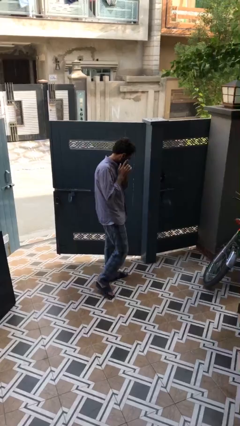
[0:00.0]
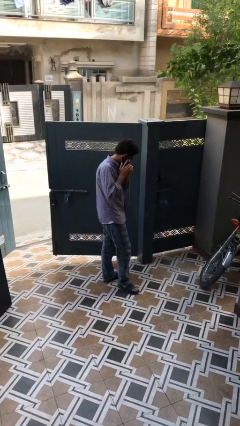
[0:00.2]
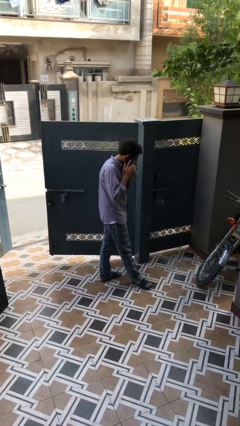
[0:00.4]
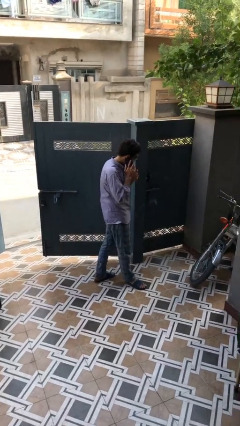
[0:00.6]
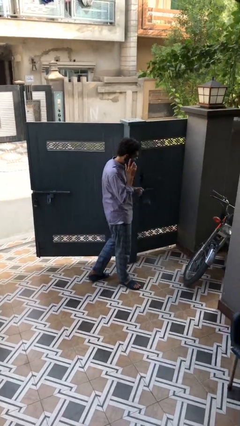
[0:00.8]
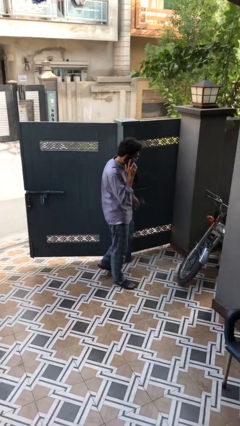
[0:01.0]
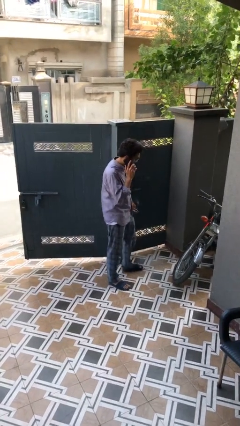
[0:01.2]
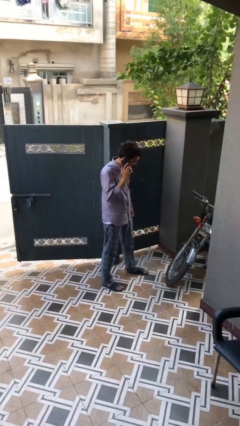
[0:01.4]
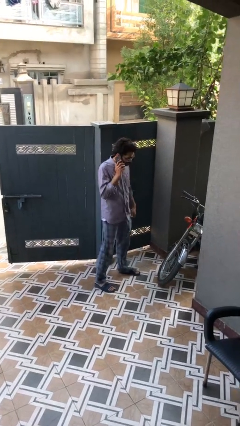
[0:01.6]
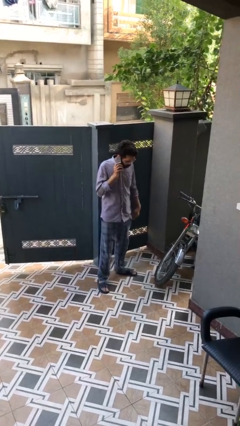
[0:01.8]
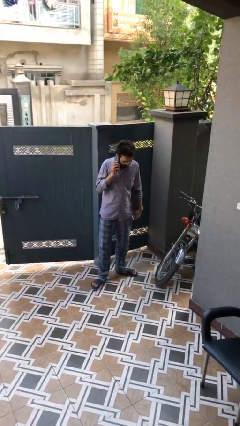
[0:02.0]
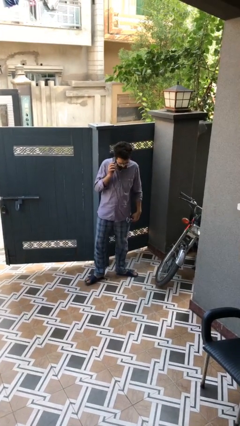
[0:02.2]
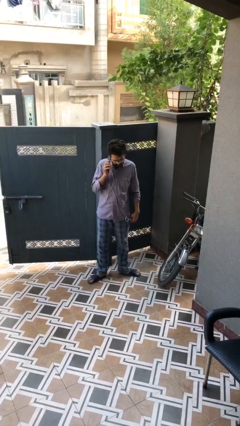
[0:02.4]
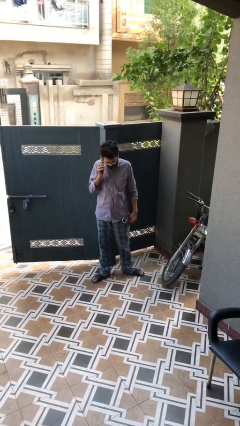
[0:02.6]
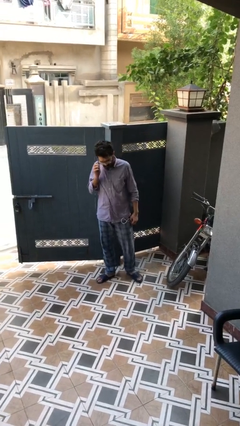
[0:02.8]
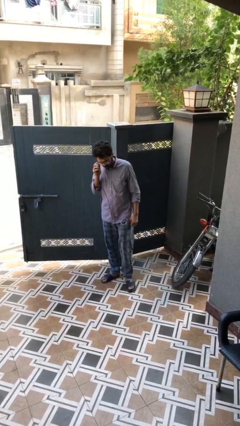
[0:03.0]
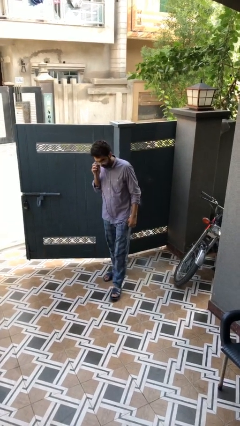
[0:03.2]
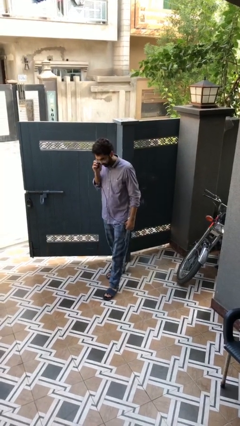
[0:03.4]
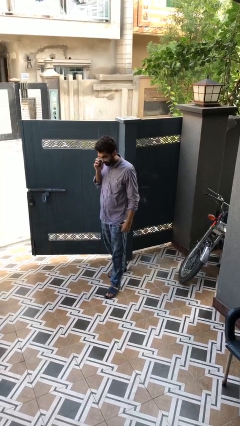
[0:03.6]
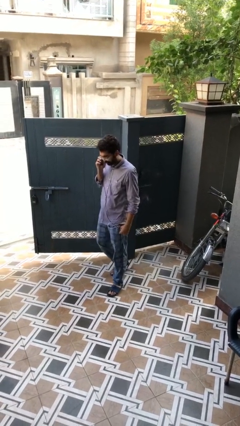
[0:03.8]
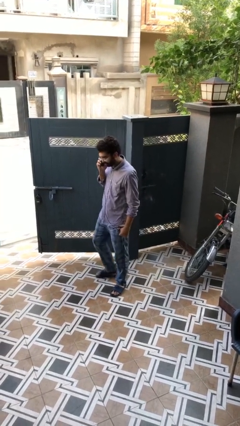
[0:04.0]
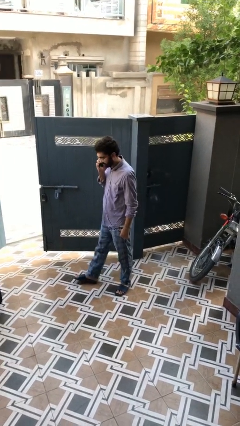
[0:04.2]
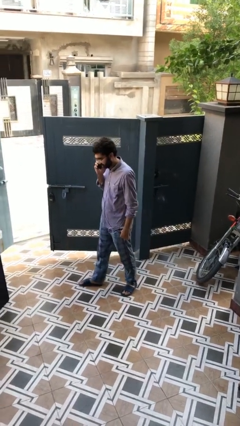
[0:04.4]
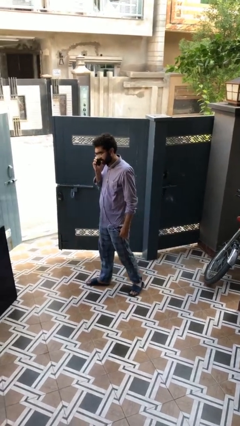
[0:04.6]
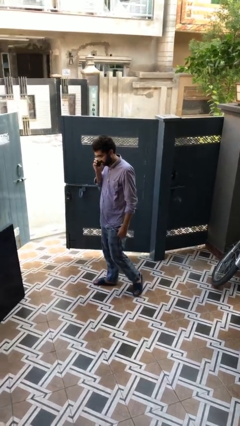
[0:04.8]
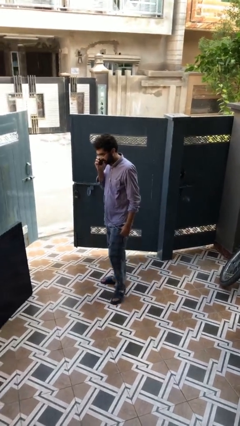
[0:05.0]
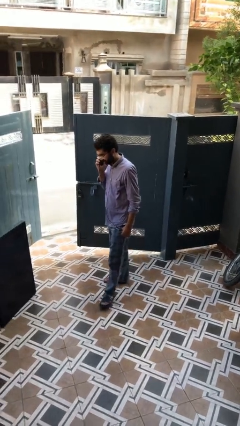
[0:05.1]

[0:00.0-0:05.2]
person talks on phone

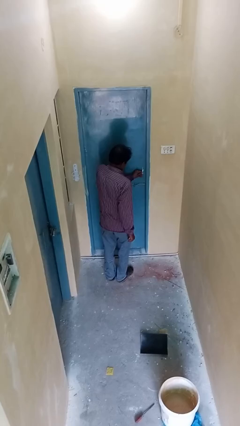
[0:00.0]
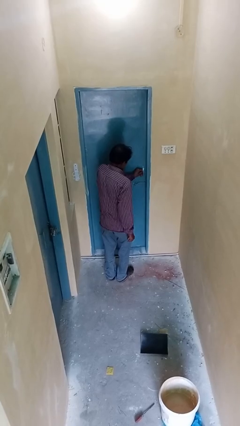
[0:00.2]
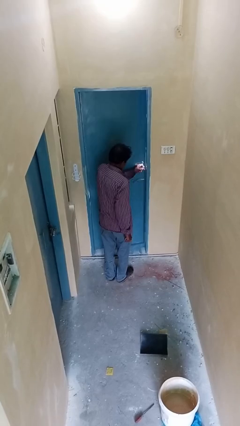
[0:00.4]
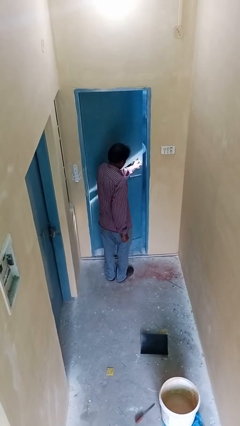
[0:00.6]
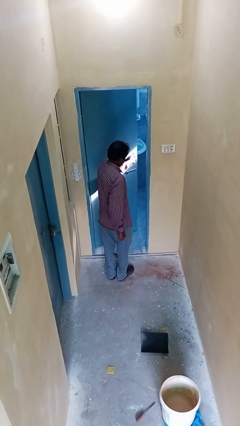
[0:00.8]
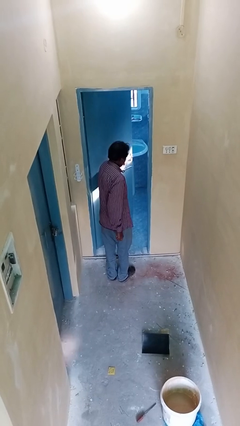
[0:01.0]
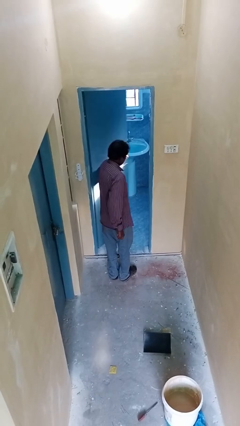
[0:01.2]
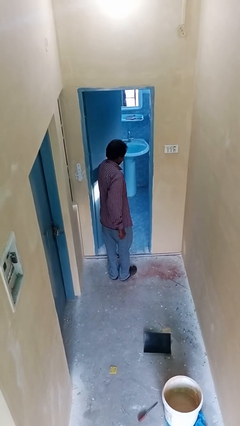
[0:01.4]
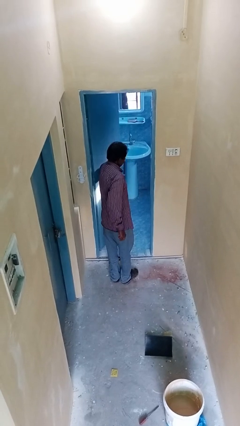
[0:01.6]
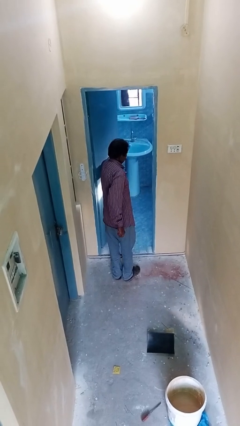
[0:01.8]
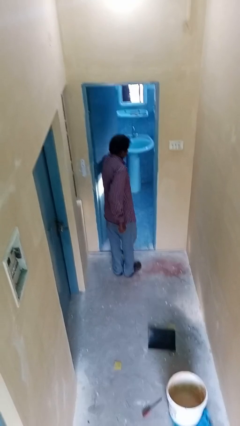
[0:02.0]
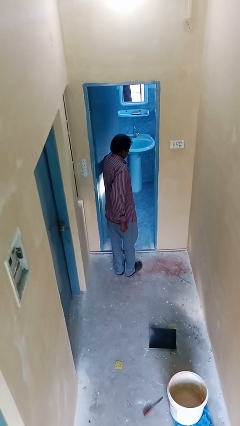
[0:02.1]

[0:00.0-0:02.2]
person opens facility door

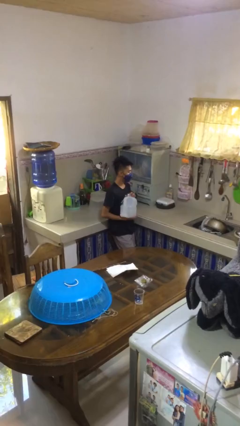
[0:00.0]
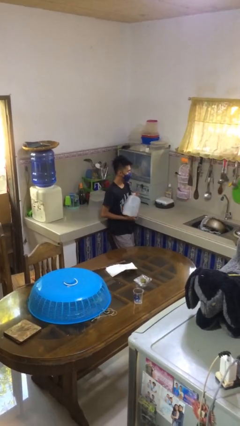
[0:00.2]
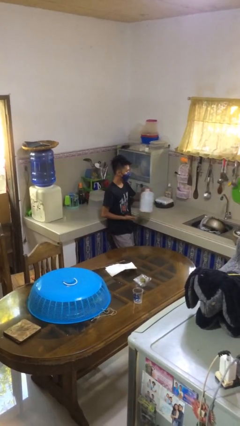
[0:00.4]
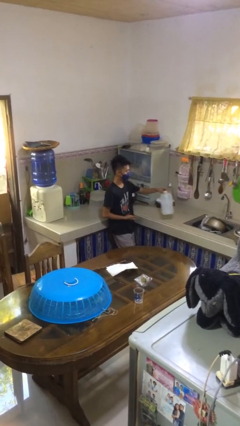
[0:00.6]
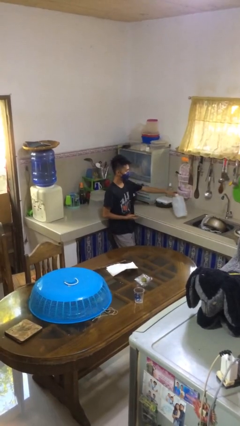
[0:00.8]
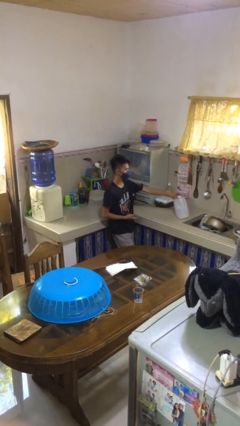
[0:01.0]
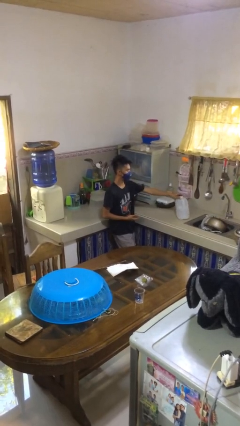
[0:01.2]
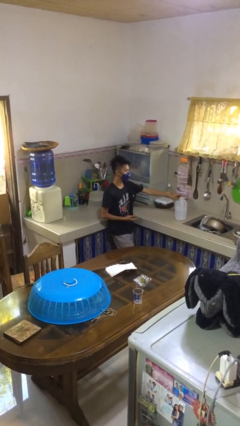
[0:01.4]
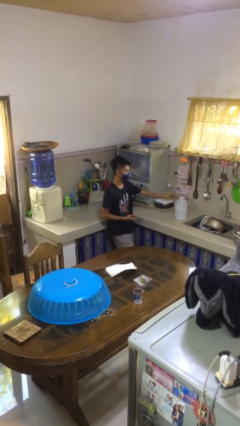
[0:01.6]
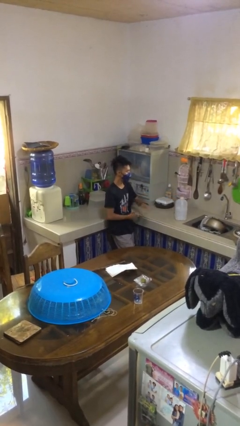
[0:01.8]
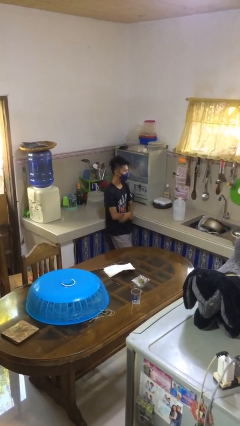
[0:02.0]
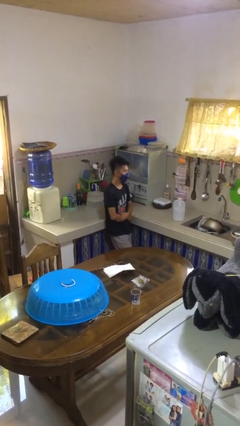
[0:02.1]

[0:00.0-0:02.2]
person puts down object on countertop

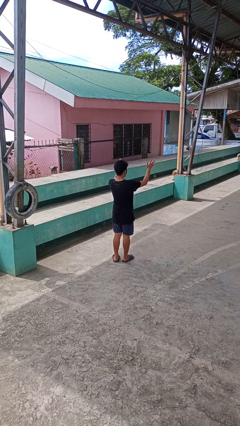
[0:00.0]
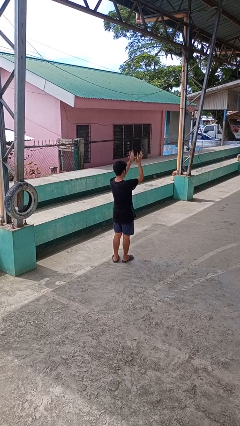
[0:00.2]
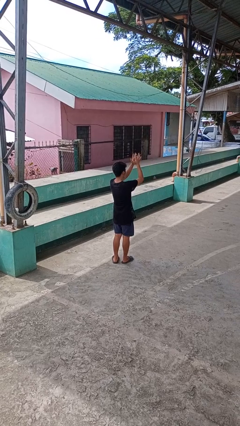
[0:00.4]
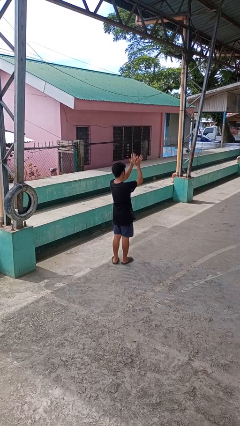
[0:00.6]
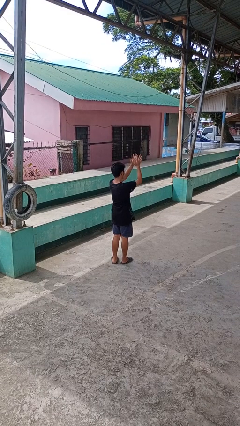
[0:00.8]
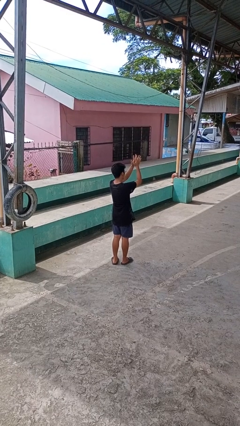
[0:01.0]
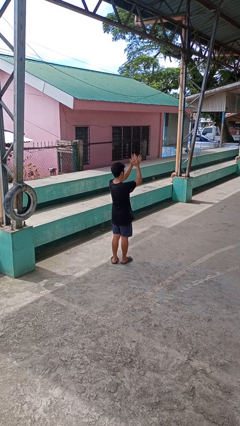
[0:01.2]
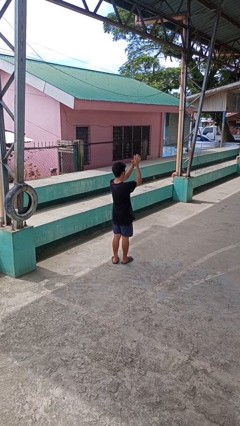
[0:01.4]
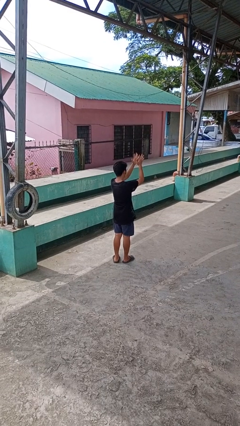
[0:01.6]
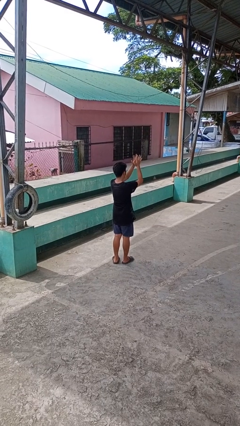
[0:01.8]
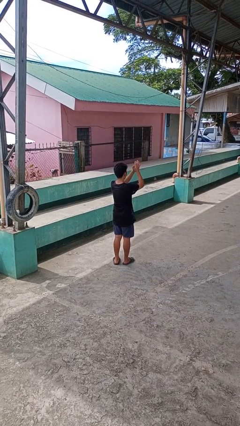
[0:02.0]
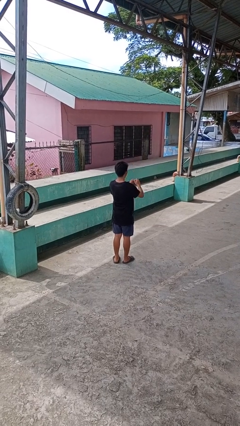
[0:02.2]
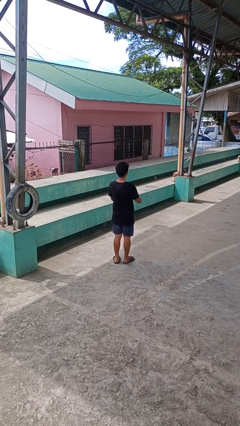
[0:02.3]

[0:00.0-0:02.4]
person claps hands

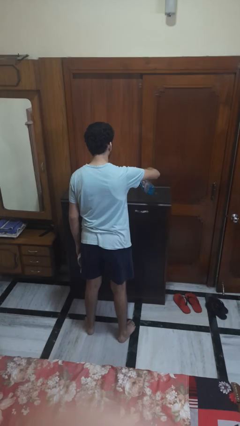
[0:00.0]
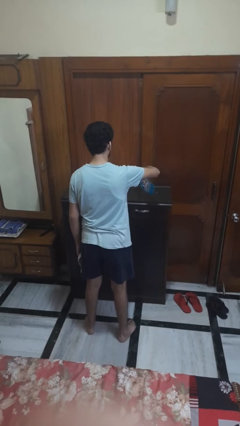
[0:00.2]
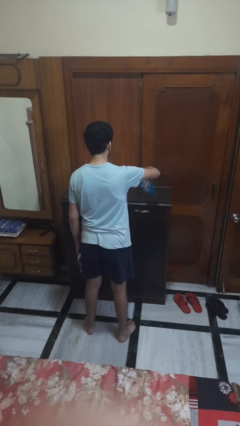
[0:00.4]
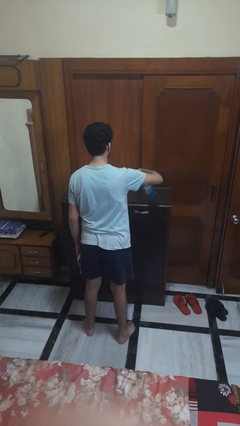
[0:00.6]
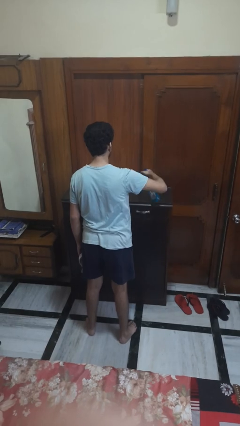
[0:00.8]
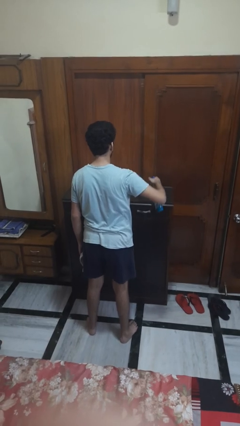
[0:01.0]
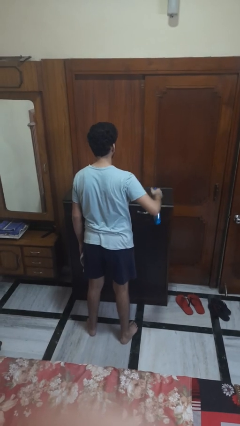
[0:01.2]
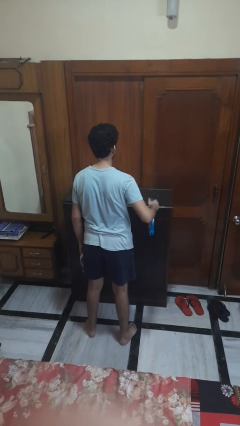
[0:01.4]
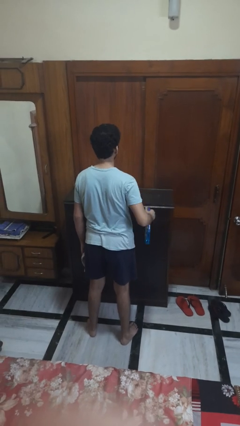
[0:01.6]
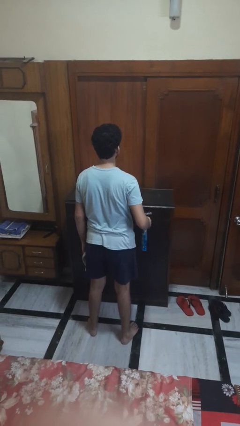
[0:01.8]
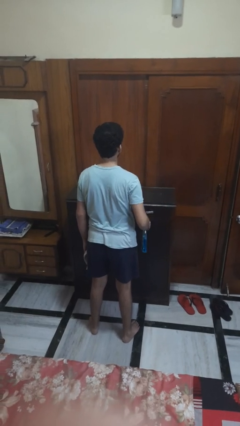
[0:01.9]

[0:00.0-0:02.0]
person sprays from bottle

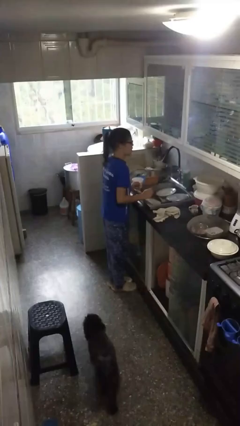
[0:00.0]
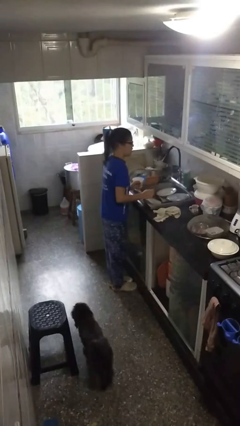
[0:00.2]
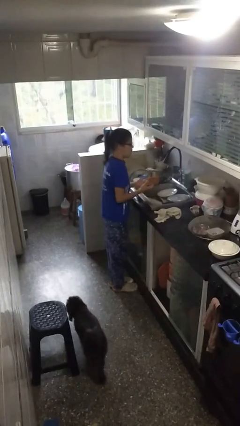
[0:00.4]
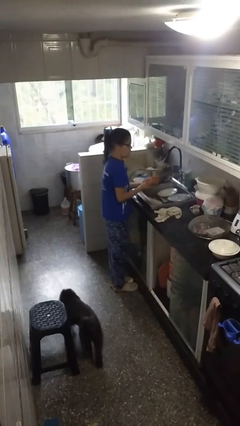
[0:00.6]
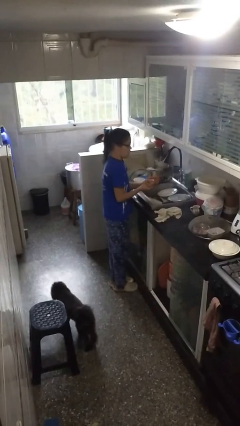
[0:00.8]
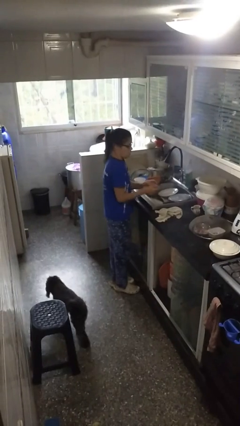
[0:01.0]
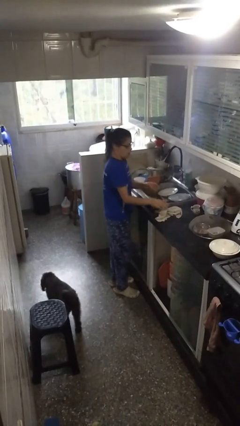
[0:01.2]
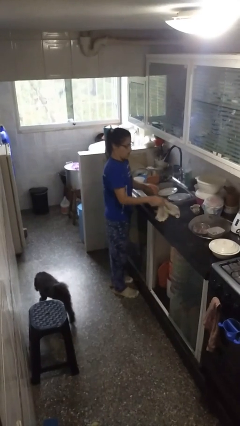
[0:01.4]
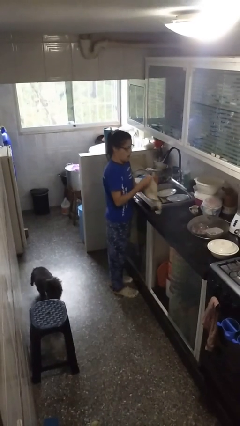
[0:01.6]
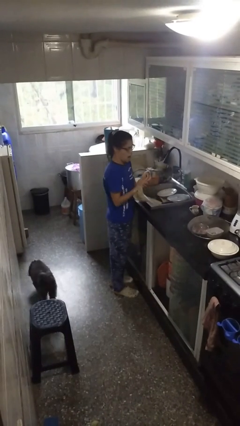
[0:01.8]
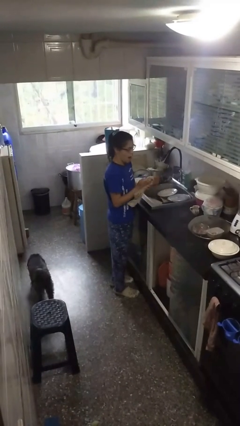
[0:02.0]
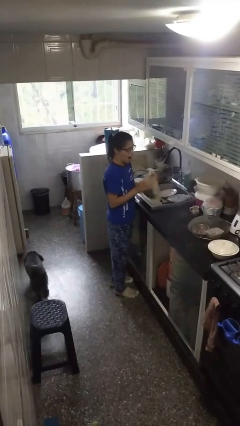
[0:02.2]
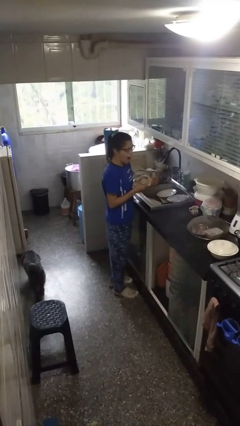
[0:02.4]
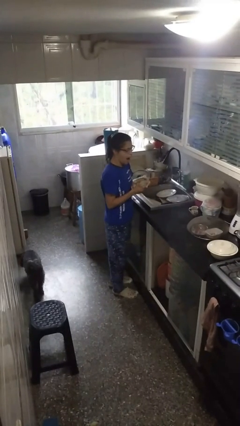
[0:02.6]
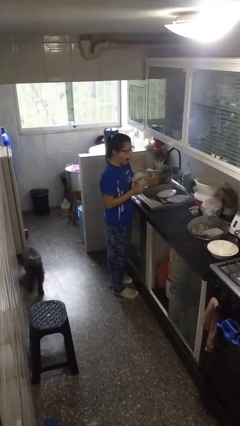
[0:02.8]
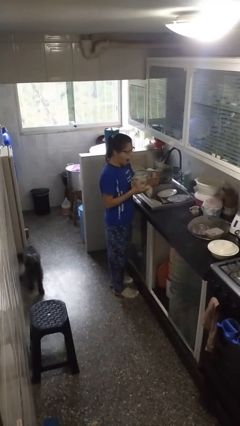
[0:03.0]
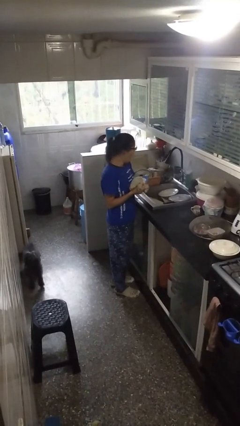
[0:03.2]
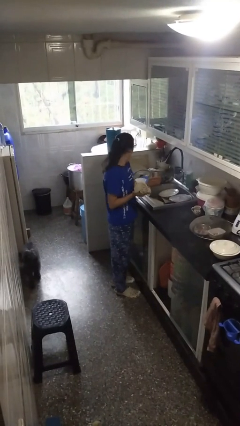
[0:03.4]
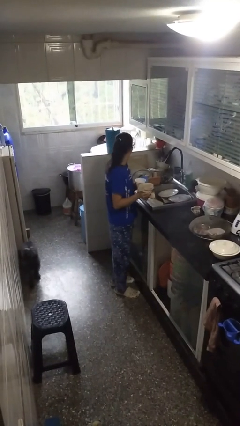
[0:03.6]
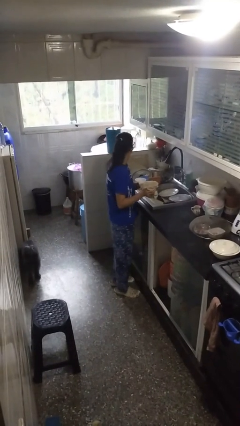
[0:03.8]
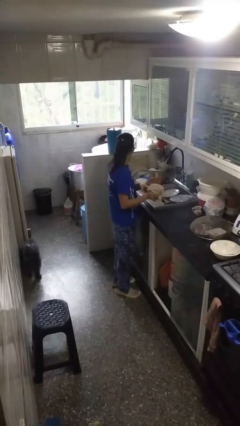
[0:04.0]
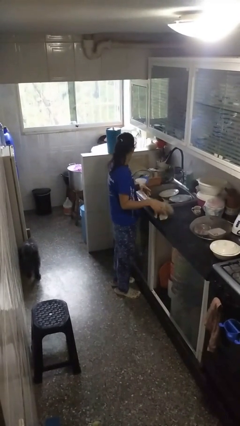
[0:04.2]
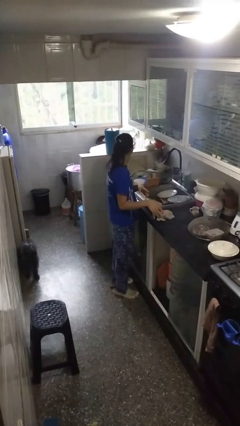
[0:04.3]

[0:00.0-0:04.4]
person dries hands with towel
